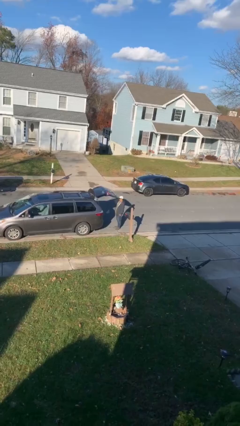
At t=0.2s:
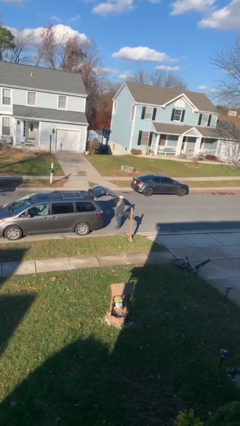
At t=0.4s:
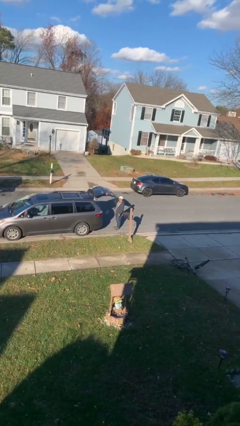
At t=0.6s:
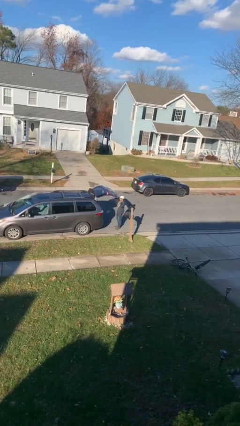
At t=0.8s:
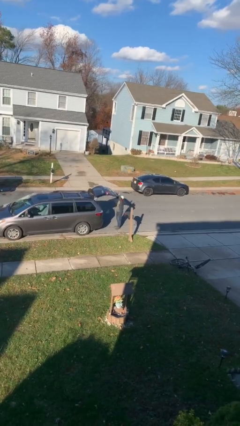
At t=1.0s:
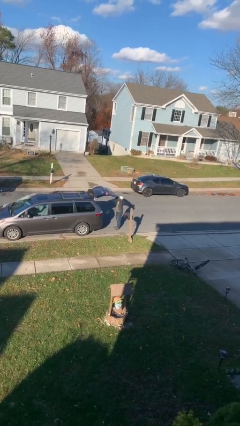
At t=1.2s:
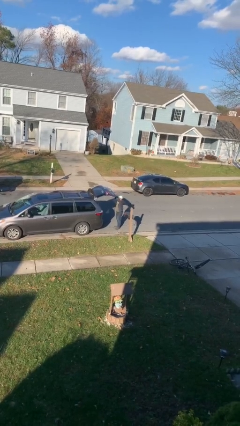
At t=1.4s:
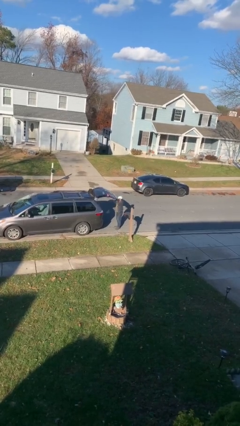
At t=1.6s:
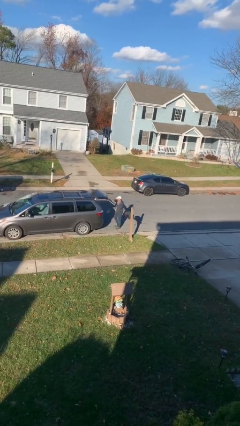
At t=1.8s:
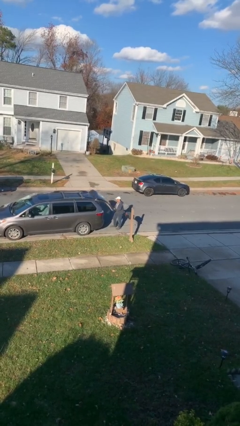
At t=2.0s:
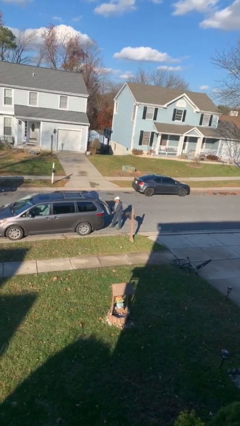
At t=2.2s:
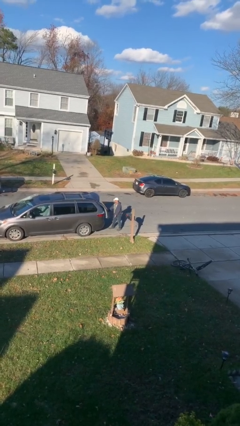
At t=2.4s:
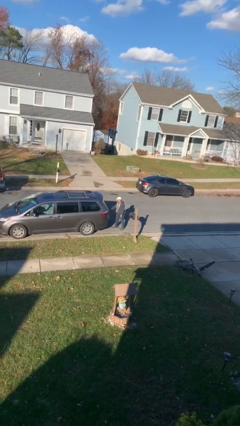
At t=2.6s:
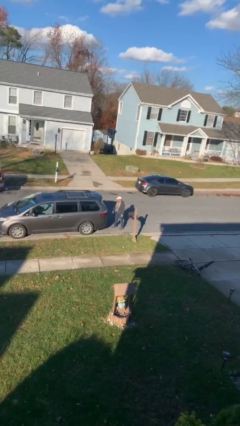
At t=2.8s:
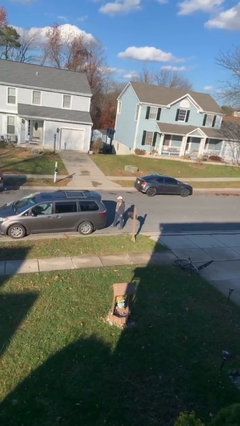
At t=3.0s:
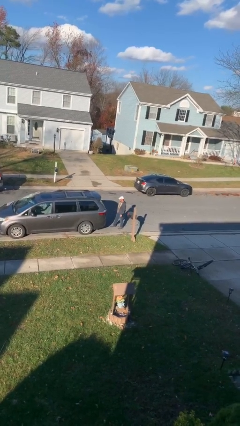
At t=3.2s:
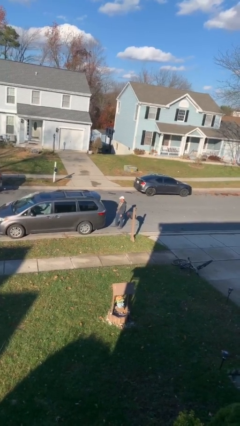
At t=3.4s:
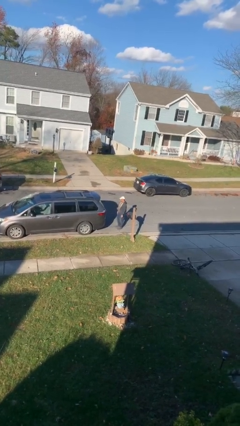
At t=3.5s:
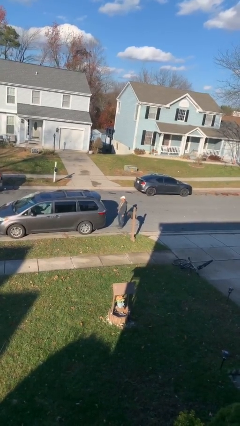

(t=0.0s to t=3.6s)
person closes car trunk

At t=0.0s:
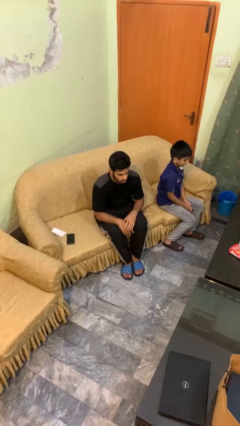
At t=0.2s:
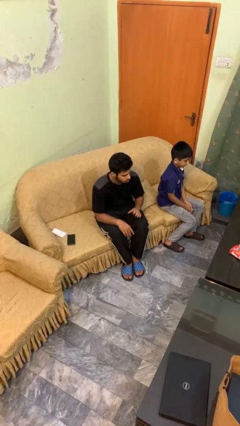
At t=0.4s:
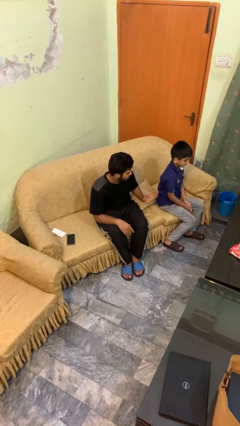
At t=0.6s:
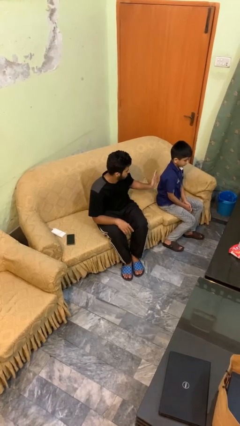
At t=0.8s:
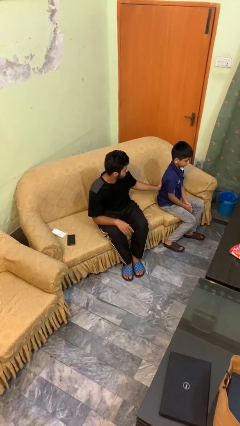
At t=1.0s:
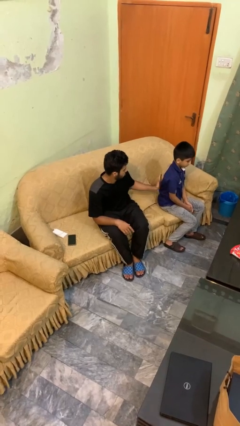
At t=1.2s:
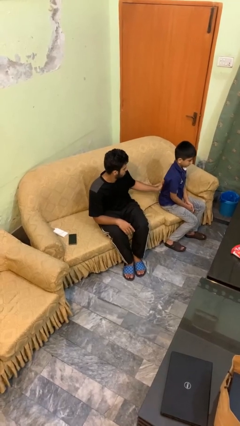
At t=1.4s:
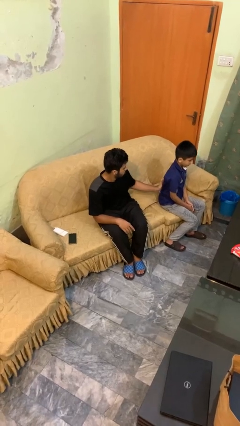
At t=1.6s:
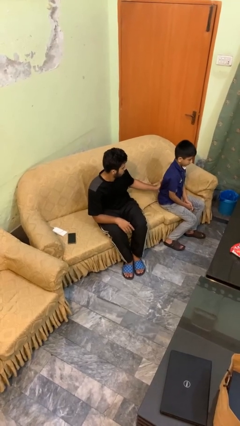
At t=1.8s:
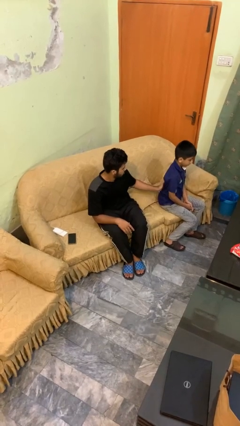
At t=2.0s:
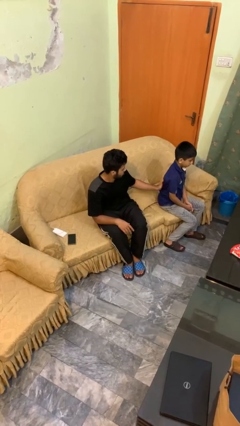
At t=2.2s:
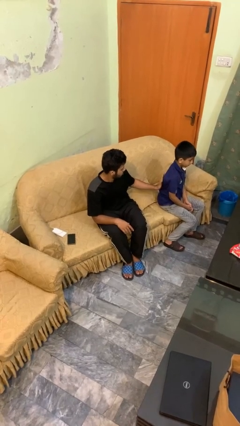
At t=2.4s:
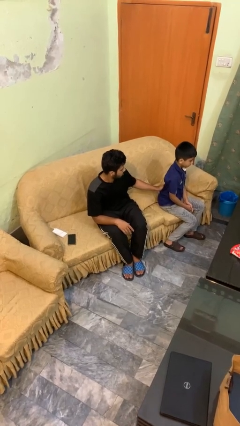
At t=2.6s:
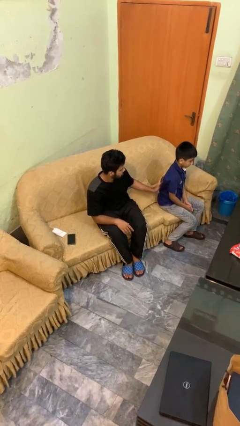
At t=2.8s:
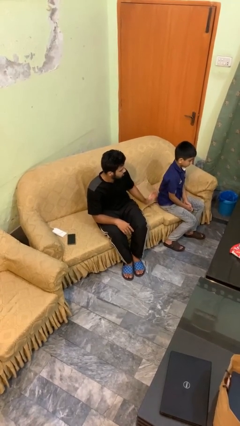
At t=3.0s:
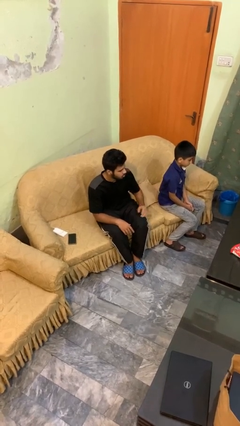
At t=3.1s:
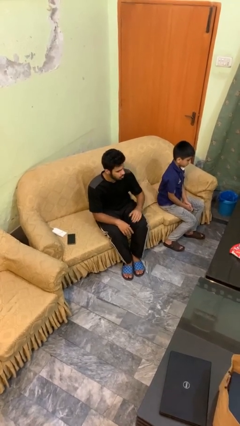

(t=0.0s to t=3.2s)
person touches back of person

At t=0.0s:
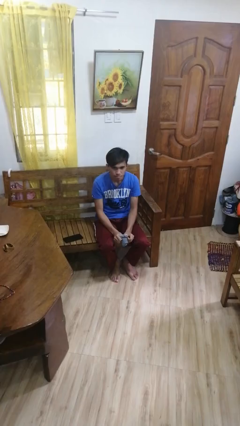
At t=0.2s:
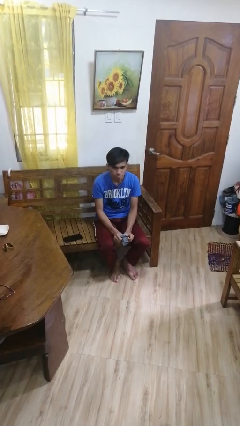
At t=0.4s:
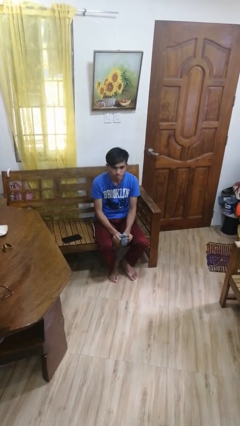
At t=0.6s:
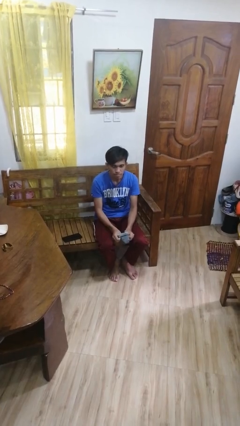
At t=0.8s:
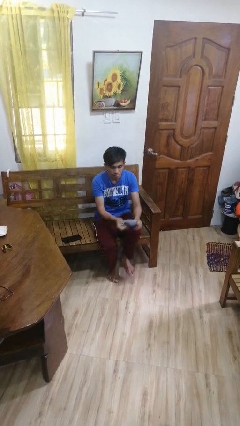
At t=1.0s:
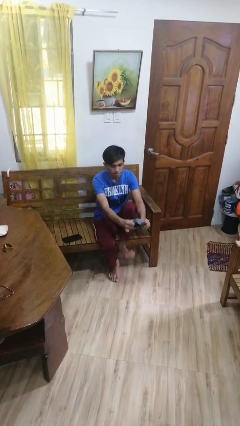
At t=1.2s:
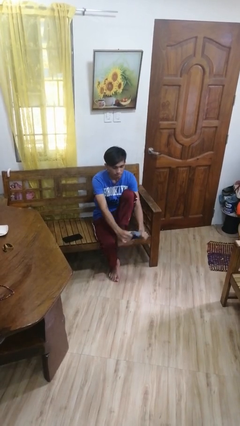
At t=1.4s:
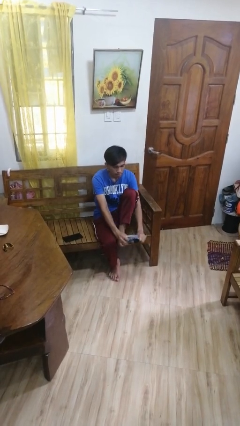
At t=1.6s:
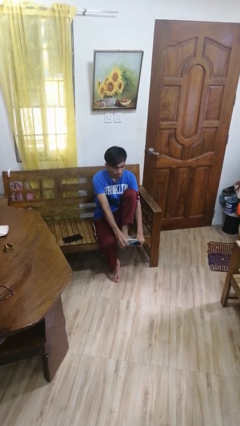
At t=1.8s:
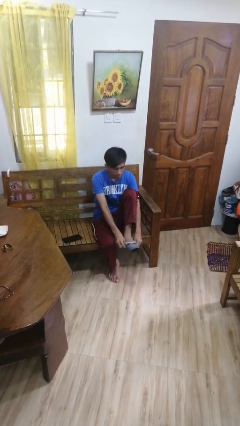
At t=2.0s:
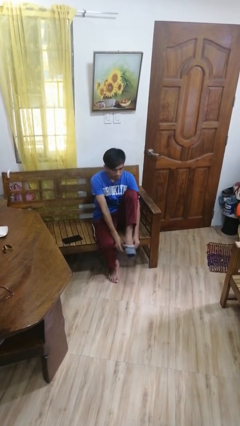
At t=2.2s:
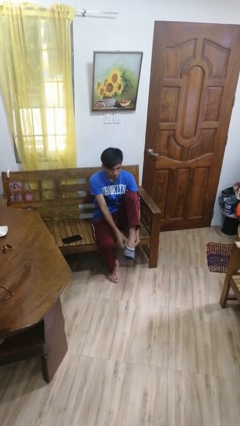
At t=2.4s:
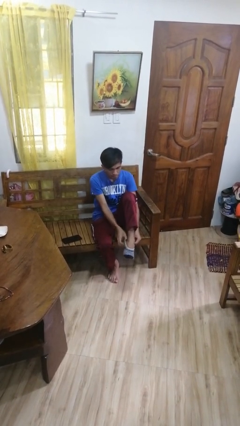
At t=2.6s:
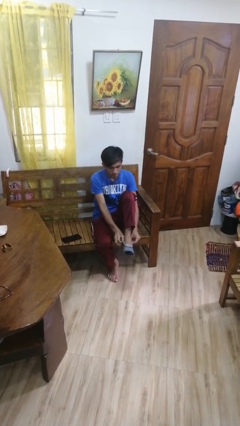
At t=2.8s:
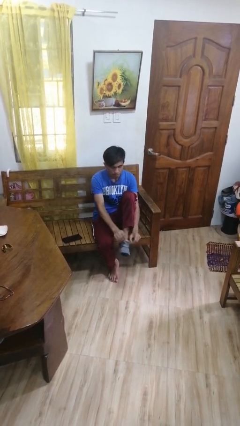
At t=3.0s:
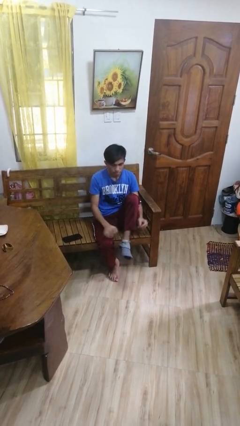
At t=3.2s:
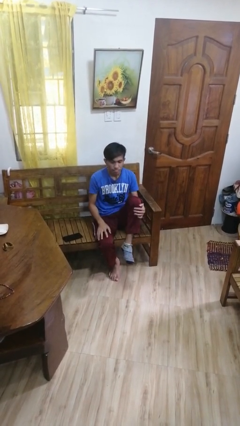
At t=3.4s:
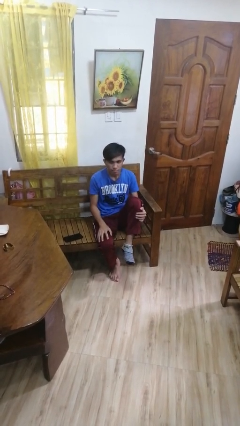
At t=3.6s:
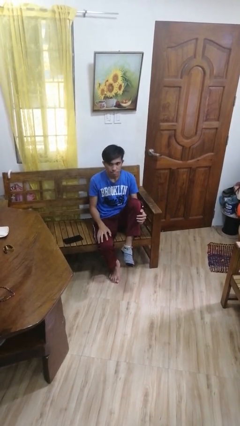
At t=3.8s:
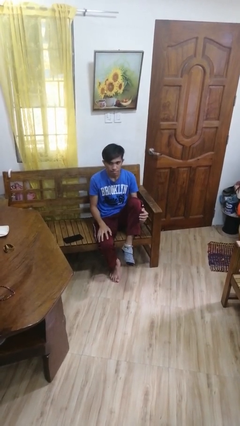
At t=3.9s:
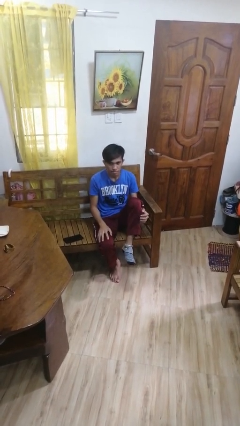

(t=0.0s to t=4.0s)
person puts on socks

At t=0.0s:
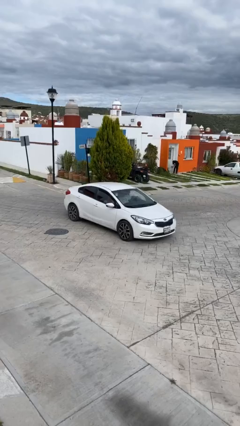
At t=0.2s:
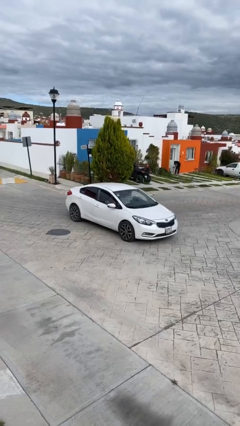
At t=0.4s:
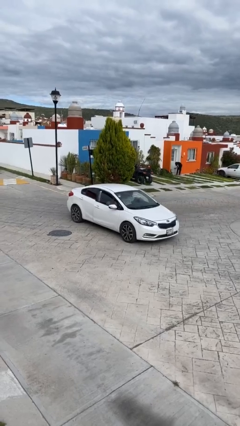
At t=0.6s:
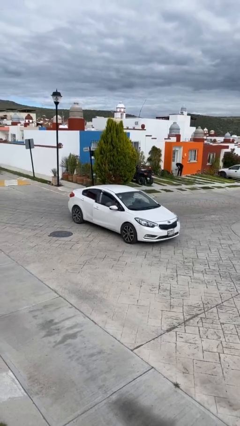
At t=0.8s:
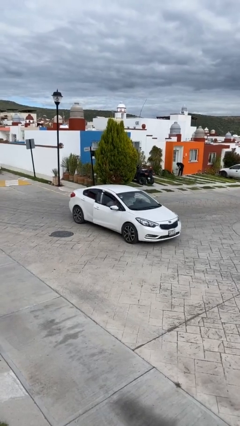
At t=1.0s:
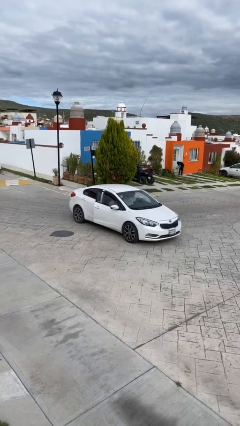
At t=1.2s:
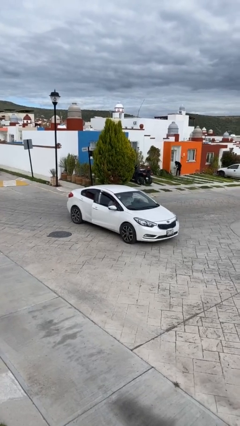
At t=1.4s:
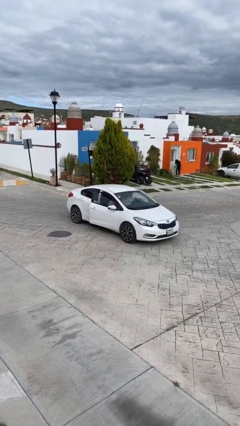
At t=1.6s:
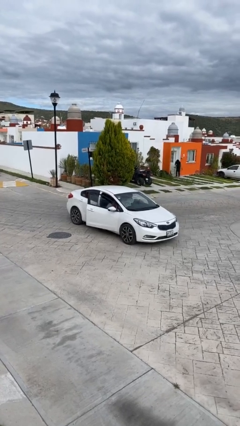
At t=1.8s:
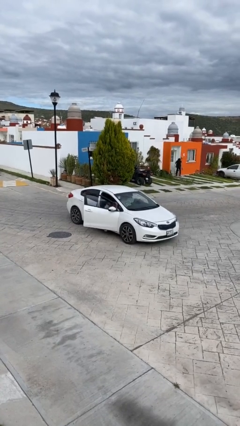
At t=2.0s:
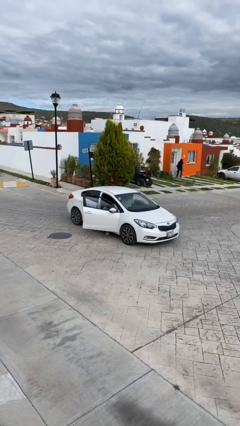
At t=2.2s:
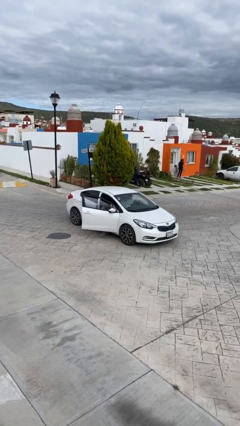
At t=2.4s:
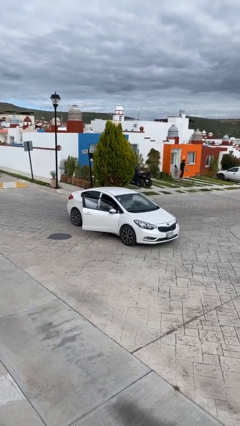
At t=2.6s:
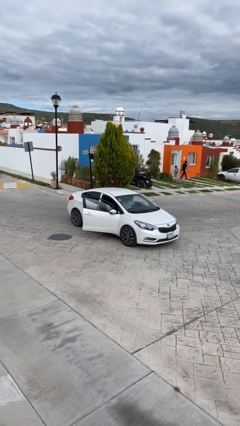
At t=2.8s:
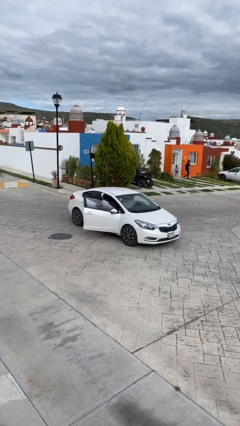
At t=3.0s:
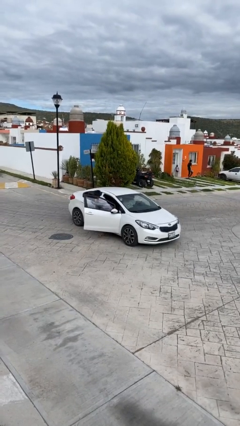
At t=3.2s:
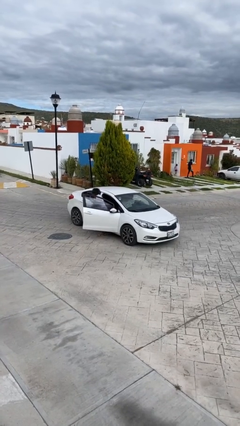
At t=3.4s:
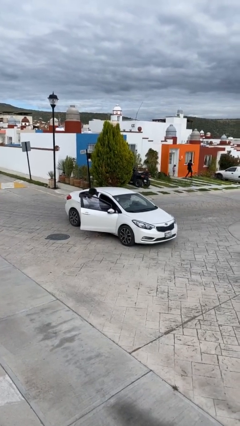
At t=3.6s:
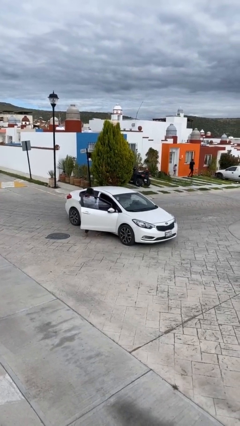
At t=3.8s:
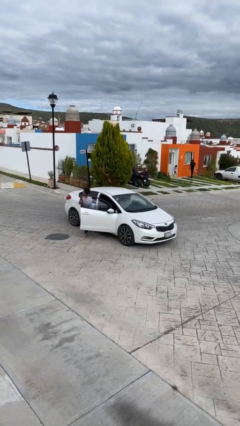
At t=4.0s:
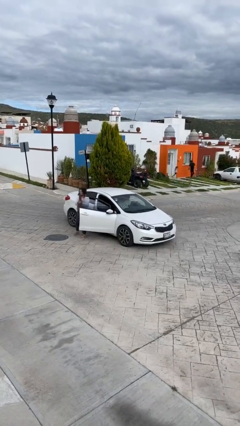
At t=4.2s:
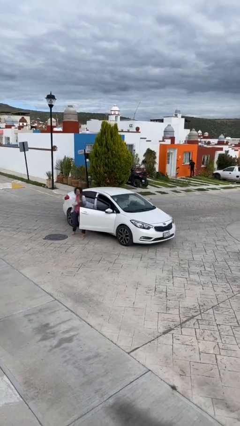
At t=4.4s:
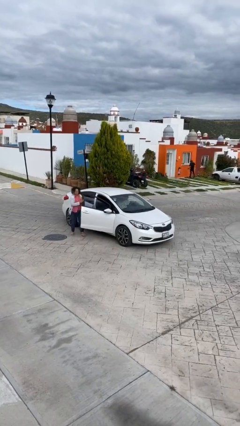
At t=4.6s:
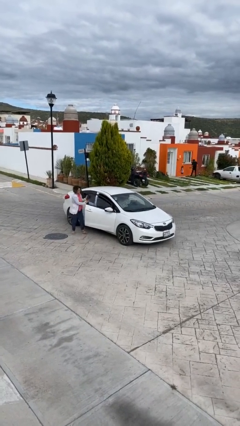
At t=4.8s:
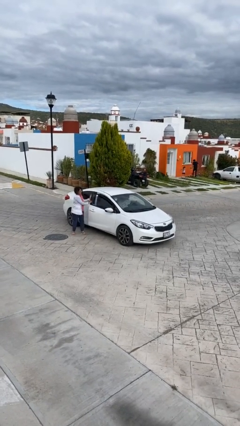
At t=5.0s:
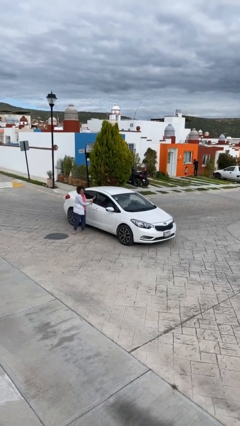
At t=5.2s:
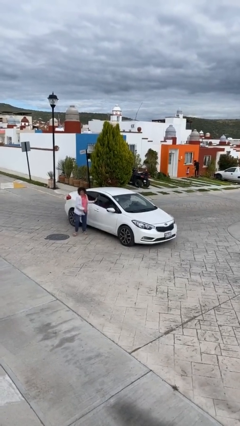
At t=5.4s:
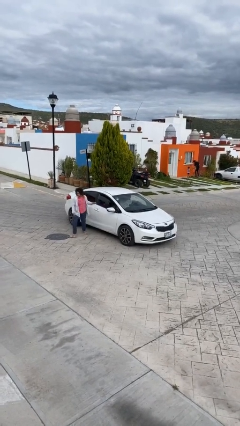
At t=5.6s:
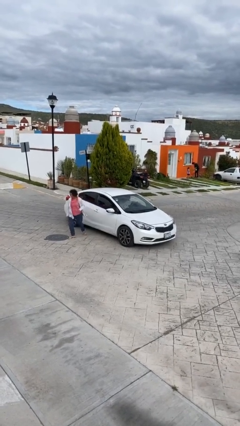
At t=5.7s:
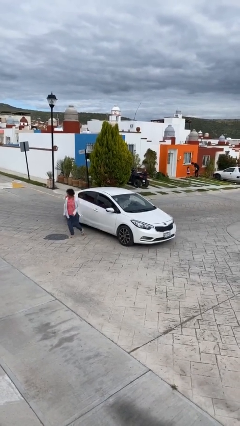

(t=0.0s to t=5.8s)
car drops off person

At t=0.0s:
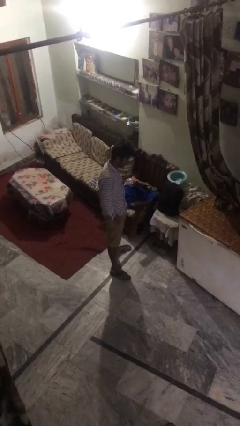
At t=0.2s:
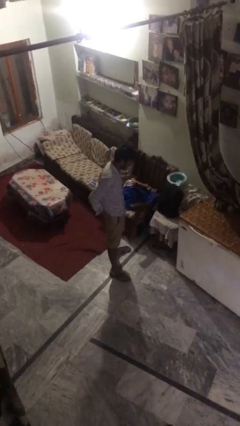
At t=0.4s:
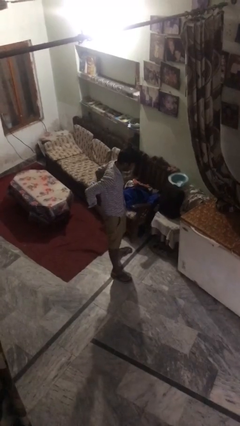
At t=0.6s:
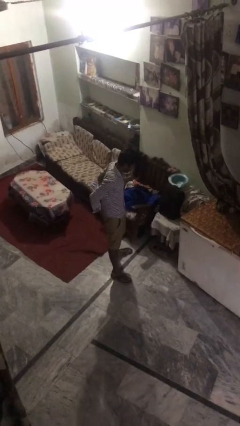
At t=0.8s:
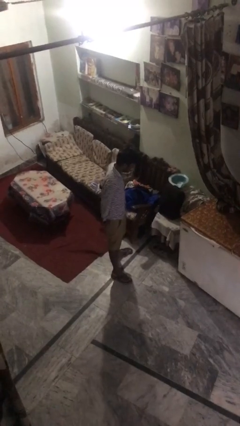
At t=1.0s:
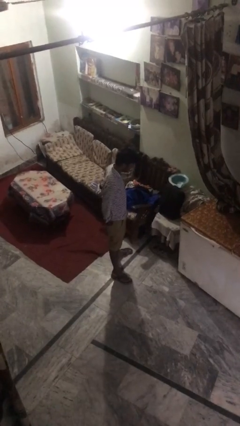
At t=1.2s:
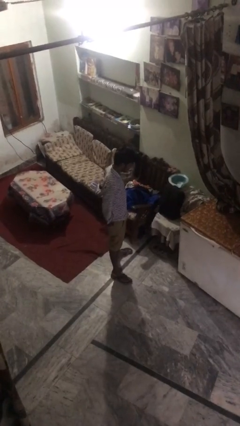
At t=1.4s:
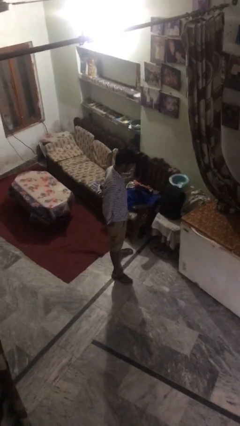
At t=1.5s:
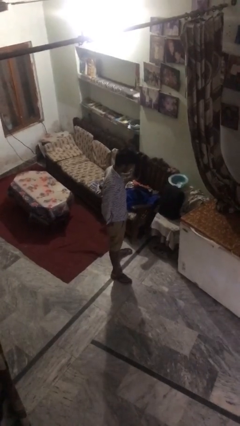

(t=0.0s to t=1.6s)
person puts hands in back pockets
